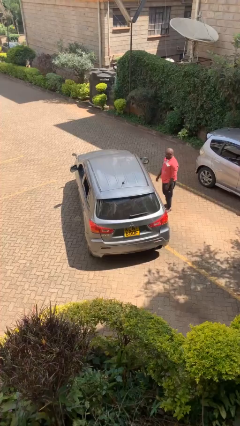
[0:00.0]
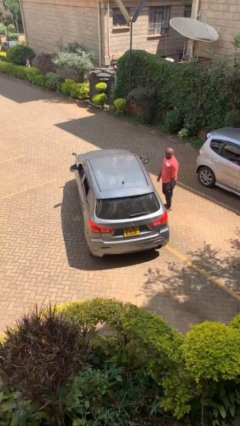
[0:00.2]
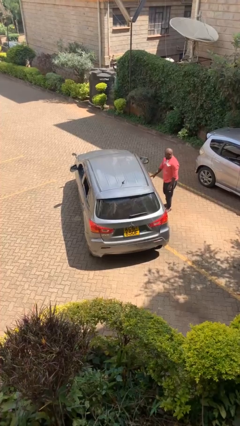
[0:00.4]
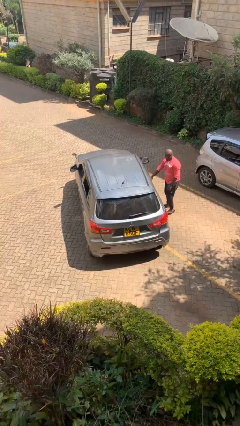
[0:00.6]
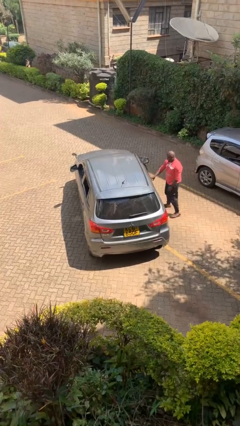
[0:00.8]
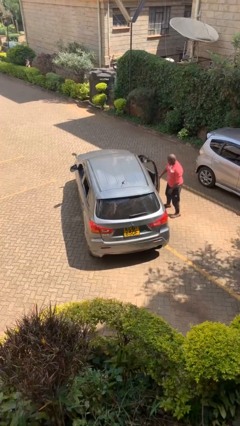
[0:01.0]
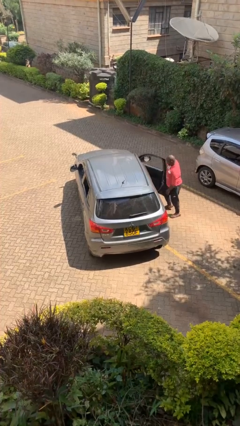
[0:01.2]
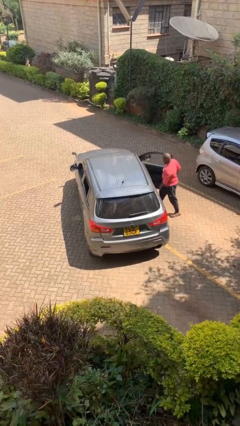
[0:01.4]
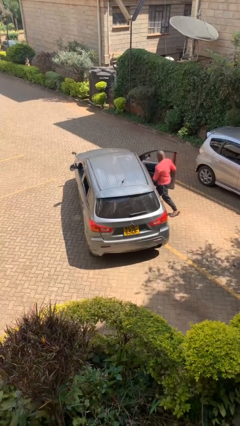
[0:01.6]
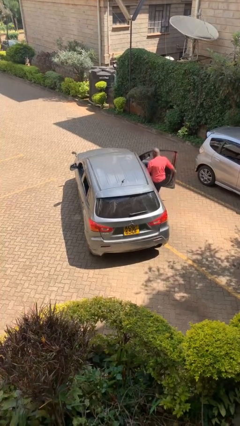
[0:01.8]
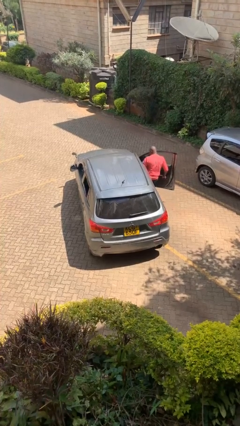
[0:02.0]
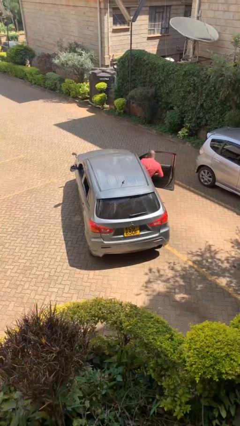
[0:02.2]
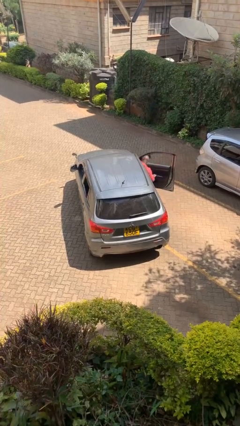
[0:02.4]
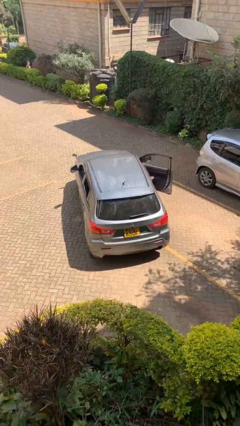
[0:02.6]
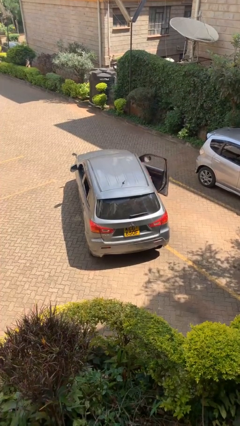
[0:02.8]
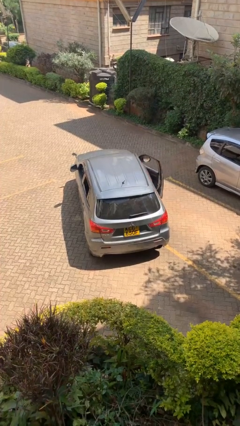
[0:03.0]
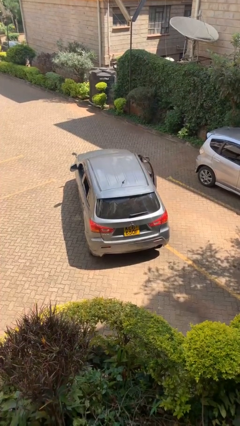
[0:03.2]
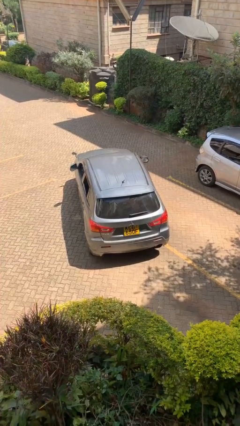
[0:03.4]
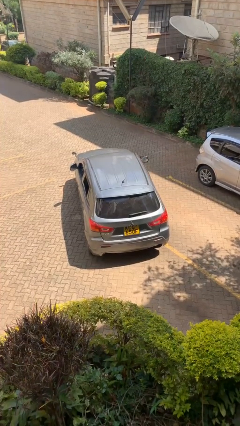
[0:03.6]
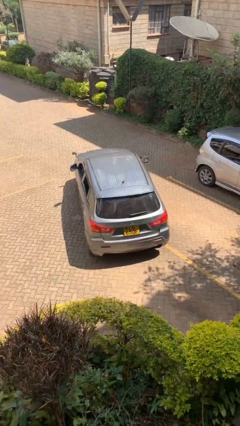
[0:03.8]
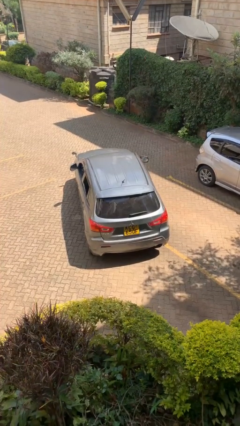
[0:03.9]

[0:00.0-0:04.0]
car picks up person

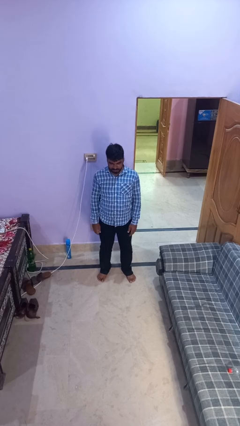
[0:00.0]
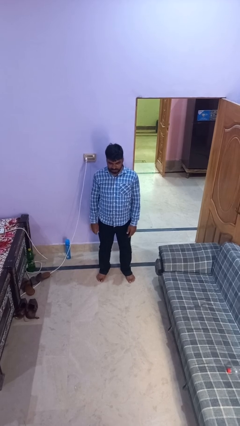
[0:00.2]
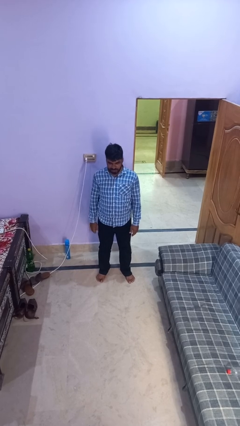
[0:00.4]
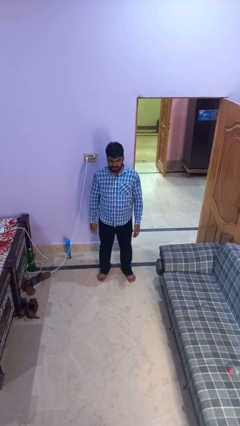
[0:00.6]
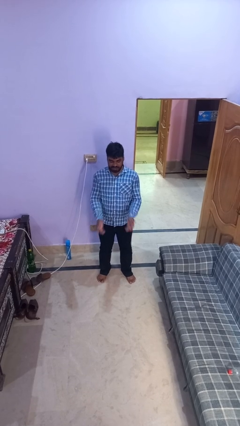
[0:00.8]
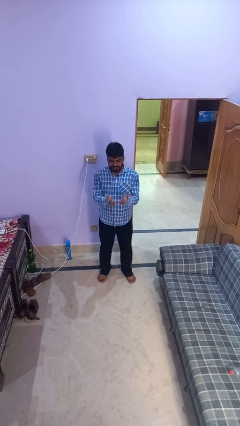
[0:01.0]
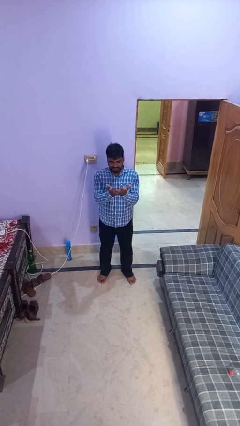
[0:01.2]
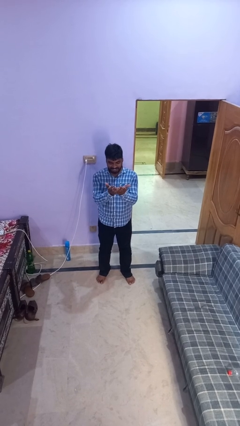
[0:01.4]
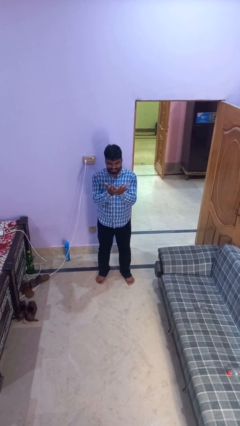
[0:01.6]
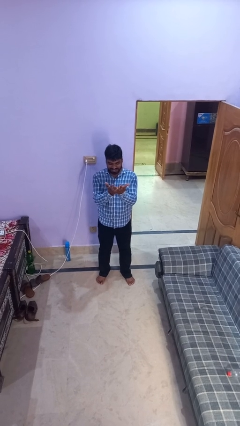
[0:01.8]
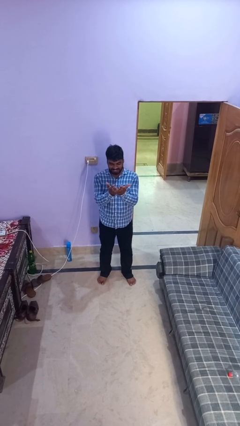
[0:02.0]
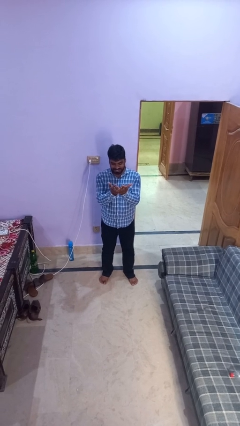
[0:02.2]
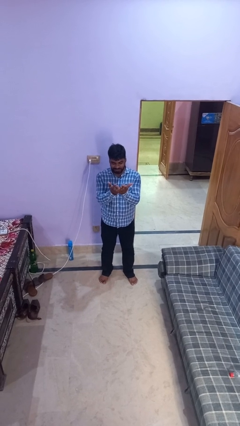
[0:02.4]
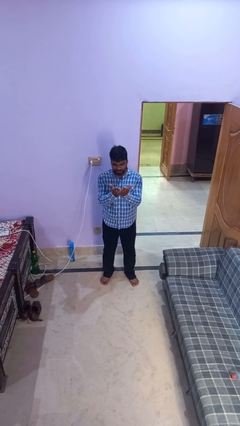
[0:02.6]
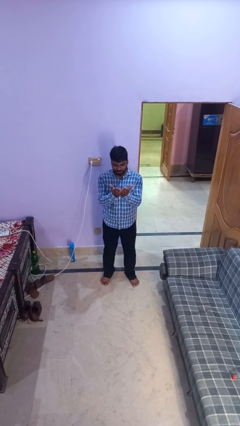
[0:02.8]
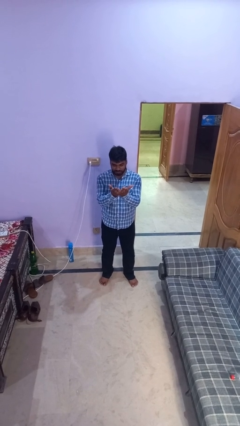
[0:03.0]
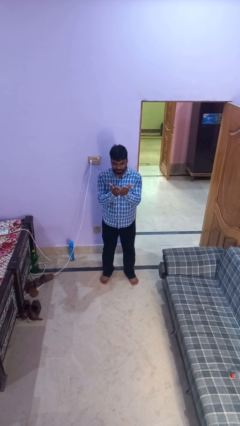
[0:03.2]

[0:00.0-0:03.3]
person prays

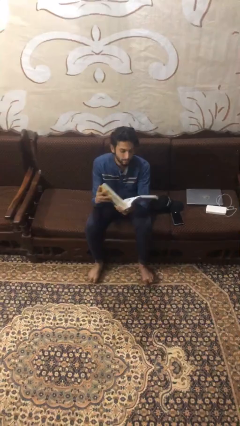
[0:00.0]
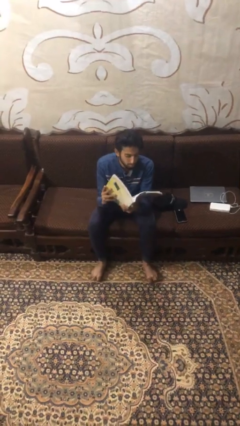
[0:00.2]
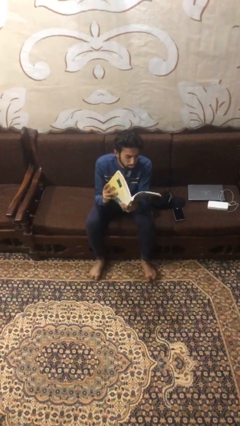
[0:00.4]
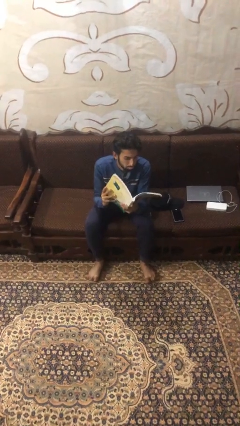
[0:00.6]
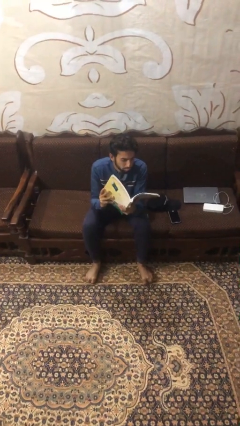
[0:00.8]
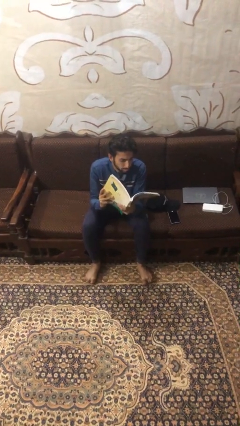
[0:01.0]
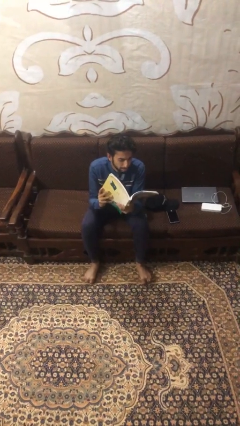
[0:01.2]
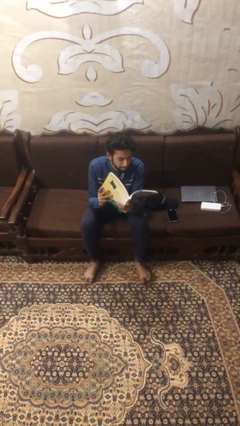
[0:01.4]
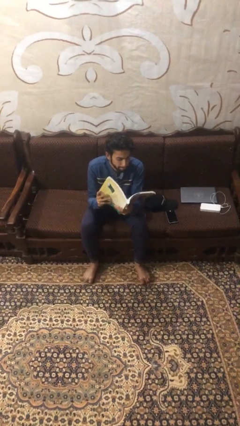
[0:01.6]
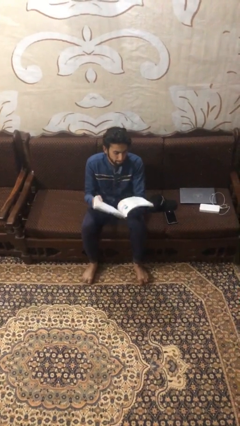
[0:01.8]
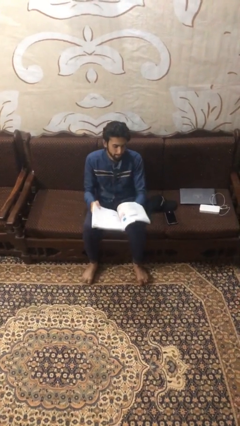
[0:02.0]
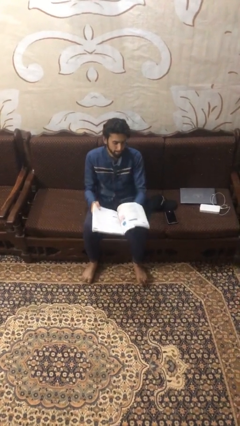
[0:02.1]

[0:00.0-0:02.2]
person reads document

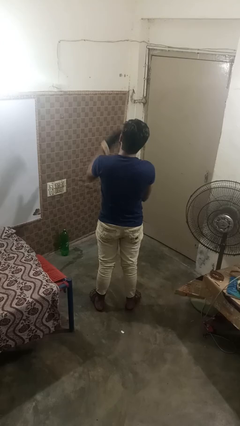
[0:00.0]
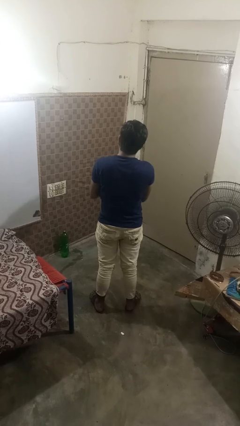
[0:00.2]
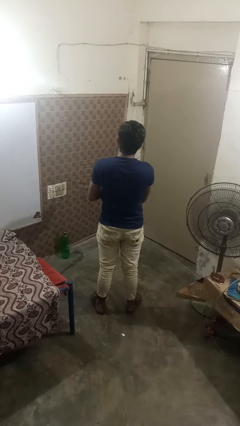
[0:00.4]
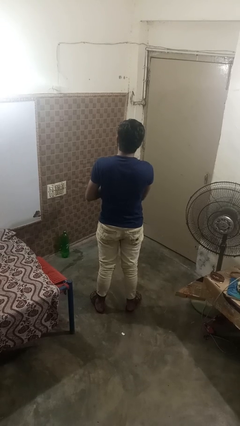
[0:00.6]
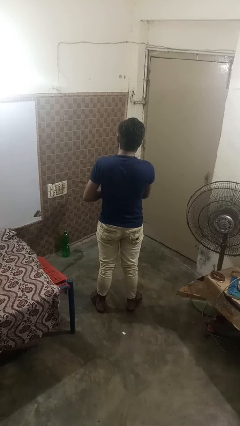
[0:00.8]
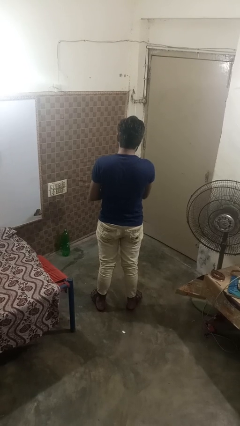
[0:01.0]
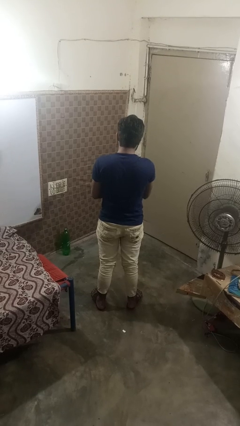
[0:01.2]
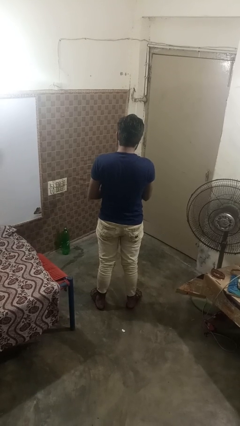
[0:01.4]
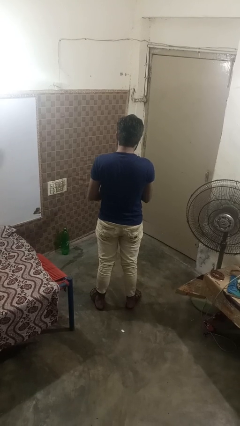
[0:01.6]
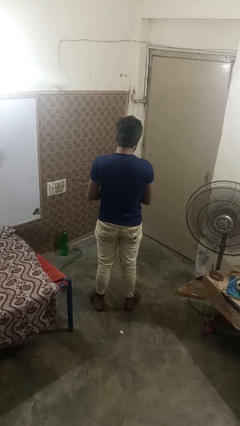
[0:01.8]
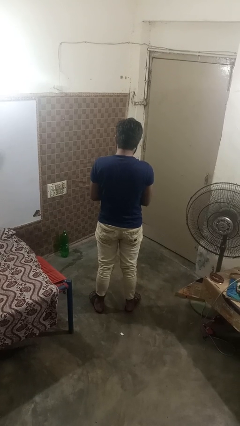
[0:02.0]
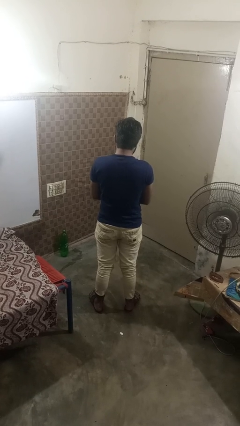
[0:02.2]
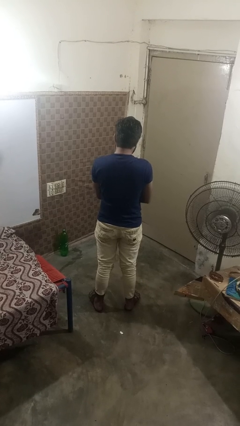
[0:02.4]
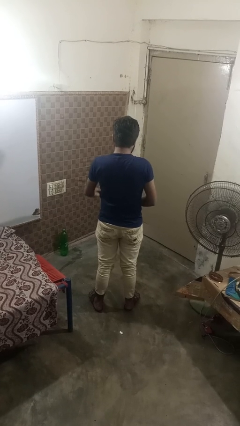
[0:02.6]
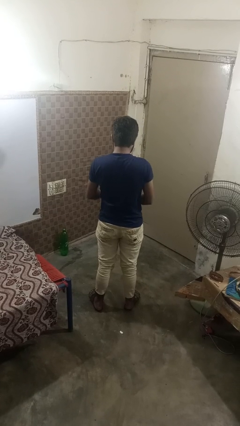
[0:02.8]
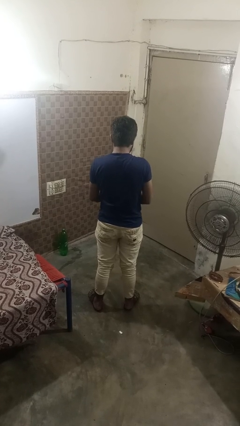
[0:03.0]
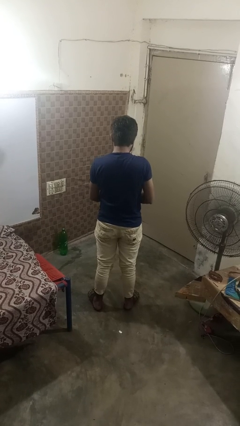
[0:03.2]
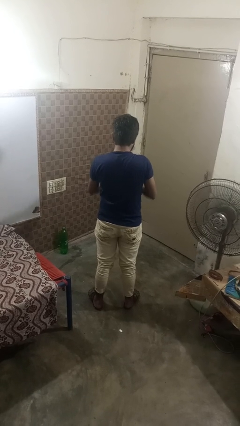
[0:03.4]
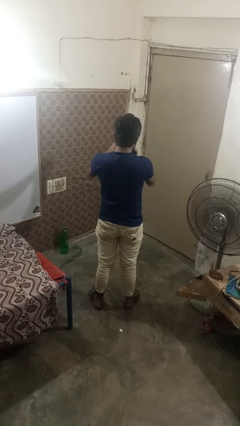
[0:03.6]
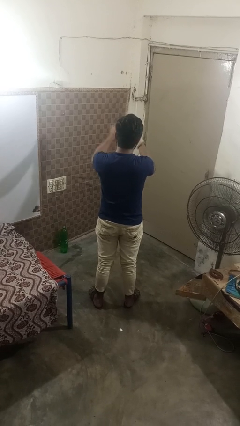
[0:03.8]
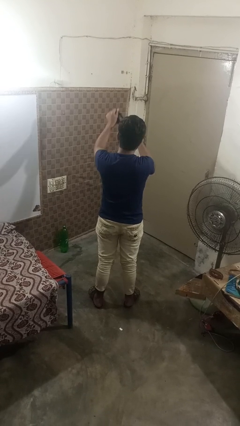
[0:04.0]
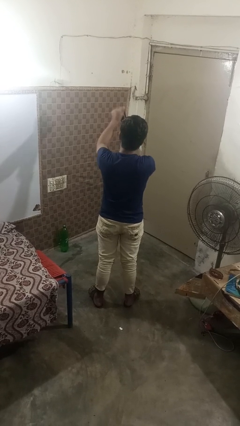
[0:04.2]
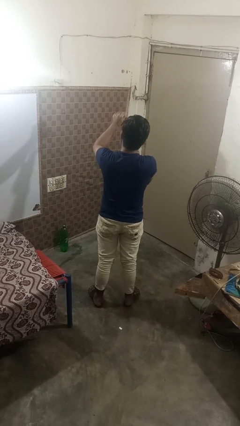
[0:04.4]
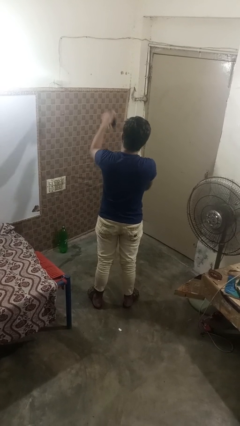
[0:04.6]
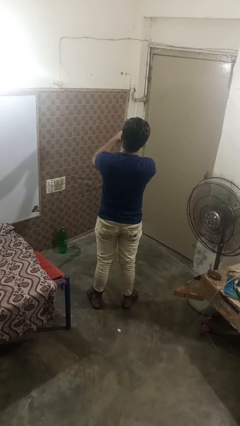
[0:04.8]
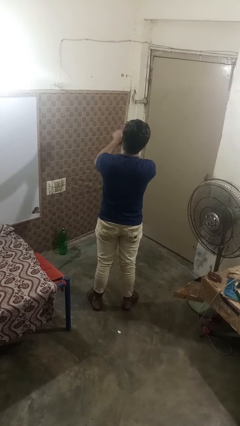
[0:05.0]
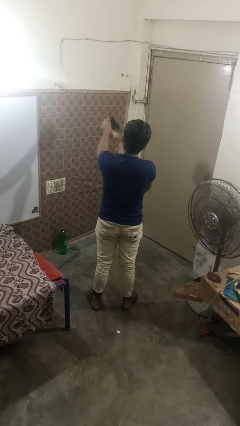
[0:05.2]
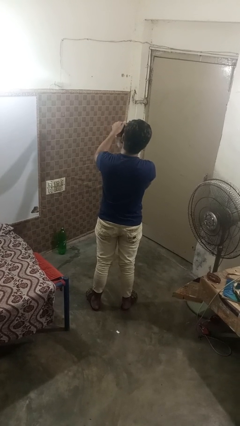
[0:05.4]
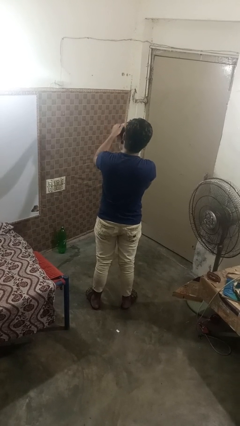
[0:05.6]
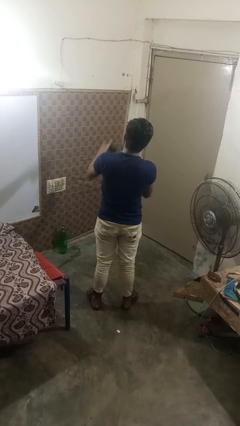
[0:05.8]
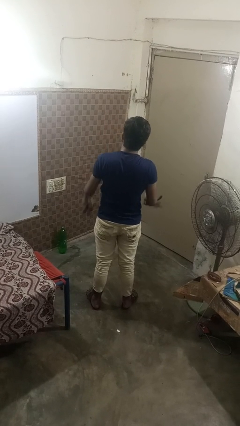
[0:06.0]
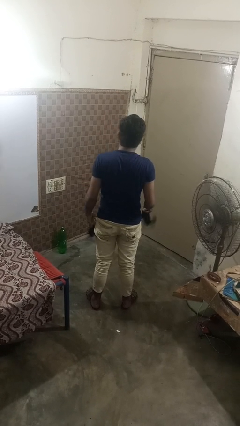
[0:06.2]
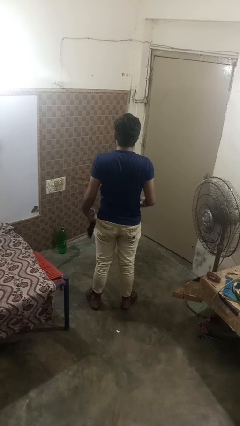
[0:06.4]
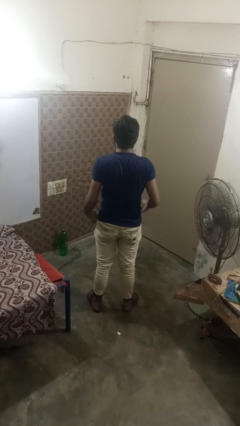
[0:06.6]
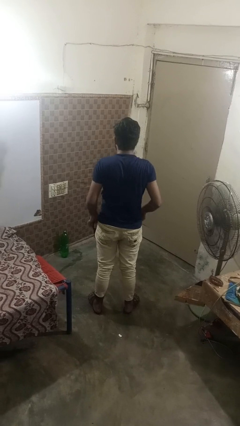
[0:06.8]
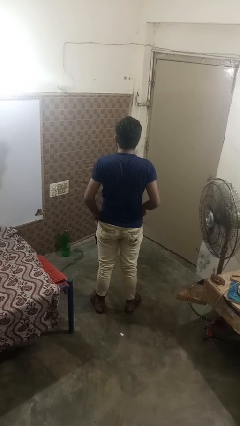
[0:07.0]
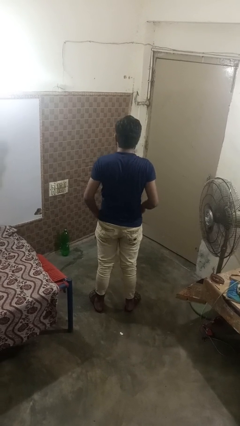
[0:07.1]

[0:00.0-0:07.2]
person takes off gloves

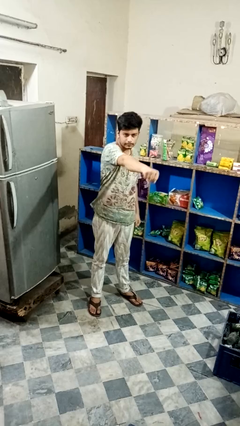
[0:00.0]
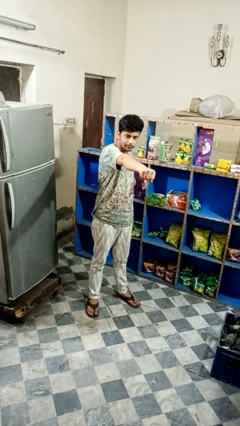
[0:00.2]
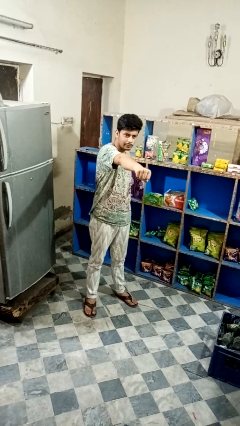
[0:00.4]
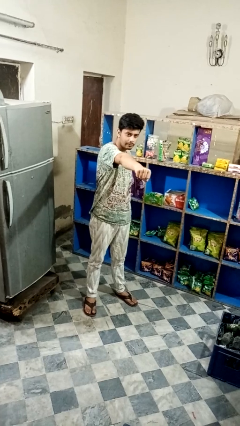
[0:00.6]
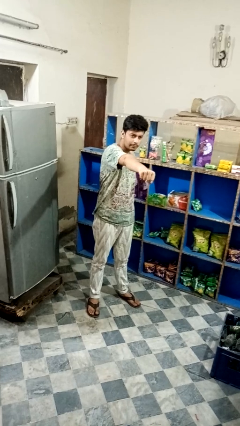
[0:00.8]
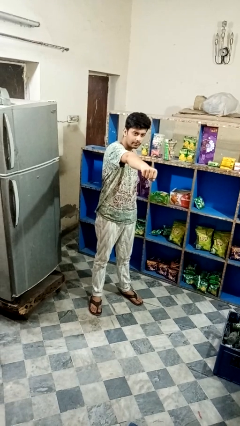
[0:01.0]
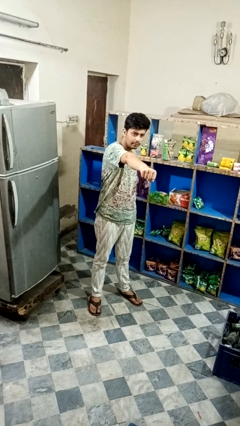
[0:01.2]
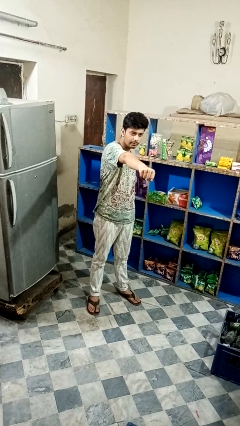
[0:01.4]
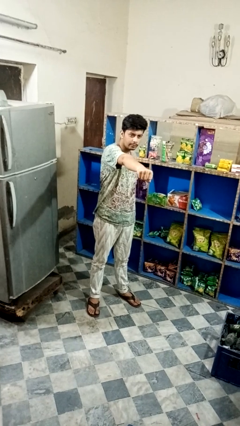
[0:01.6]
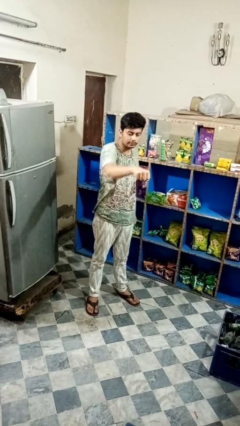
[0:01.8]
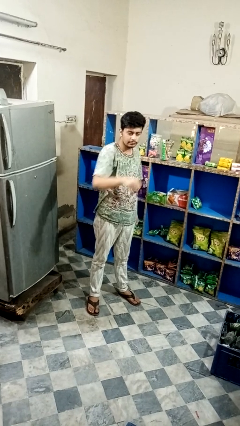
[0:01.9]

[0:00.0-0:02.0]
person punches
